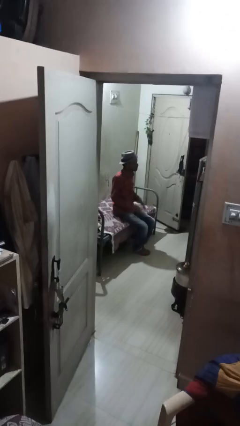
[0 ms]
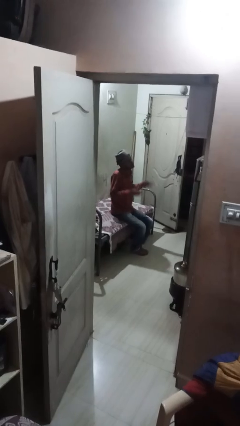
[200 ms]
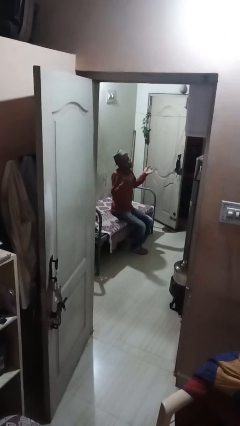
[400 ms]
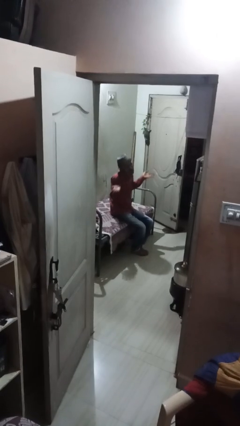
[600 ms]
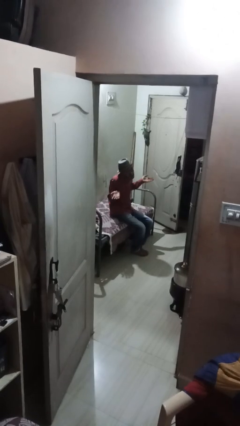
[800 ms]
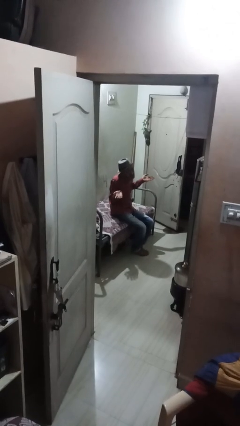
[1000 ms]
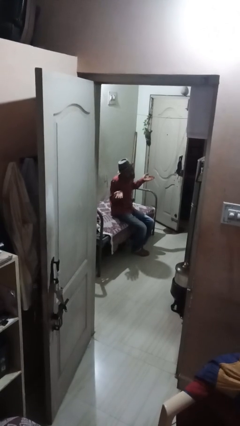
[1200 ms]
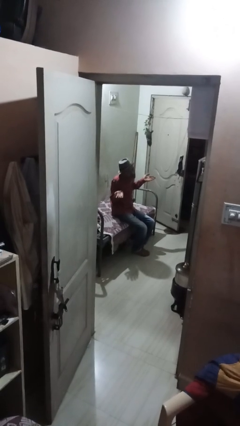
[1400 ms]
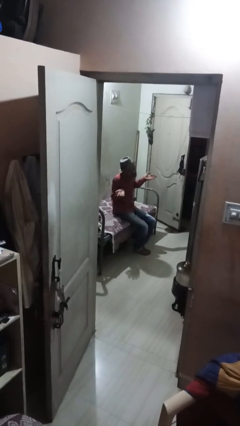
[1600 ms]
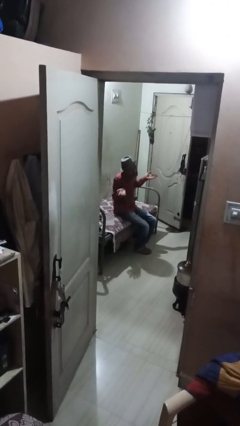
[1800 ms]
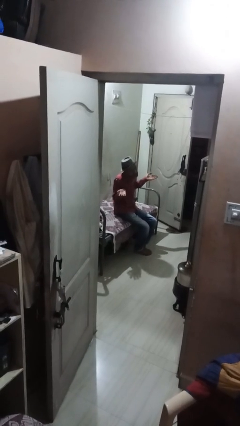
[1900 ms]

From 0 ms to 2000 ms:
person shrugs

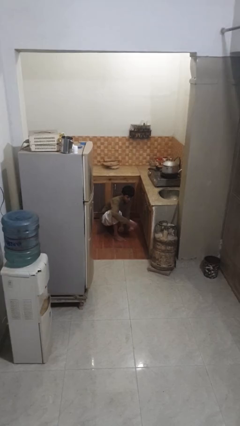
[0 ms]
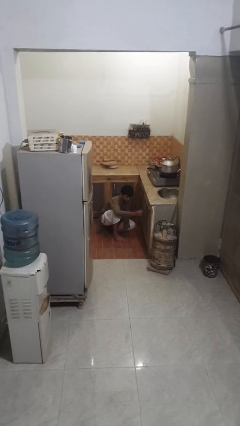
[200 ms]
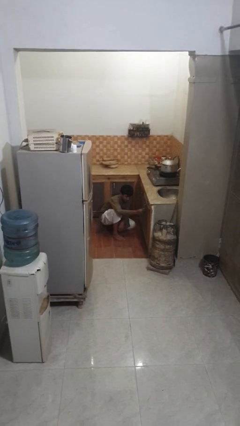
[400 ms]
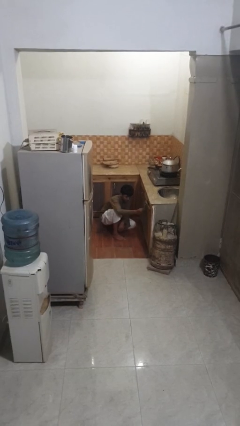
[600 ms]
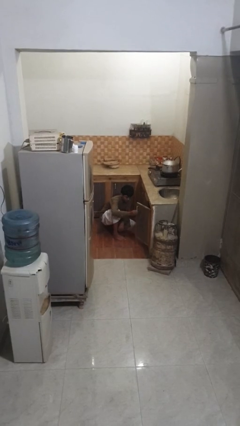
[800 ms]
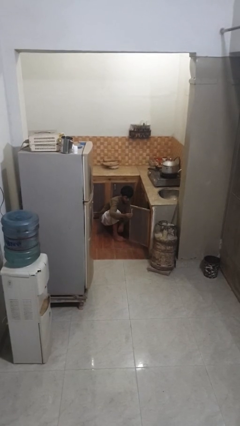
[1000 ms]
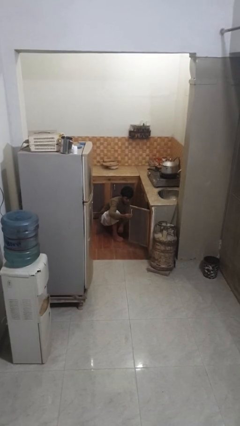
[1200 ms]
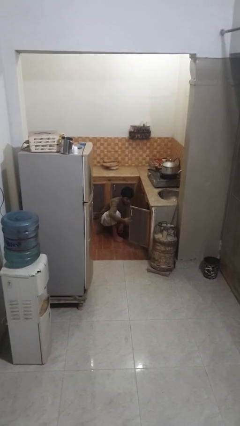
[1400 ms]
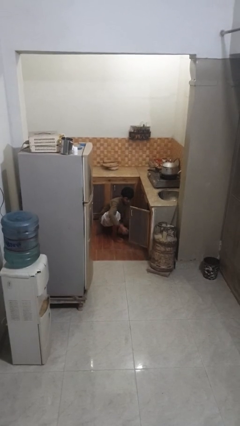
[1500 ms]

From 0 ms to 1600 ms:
person opens kitchen drawer

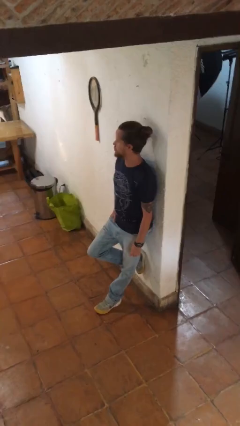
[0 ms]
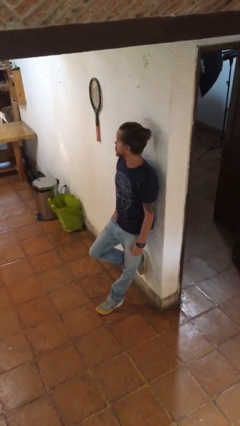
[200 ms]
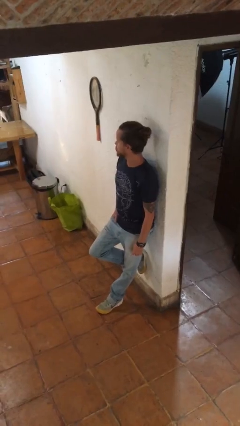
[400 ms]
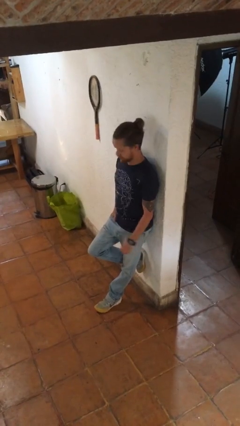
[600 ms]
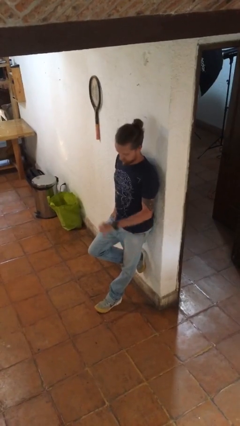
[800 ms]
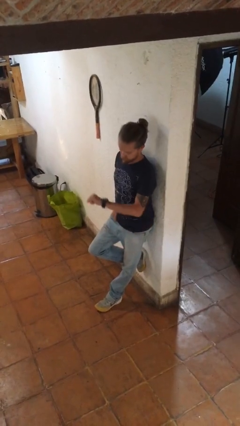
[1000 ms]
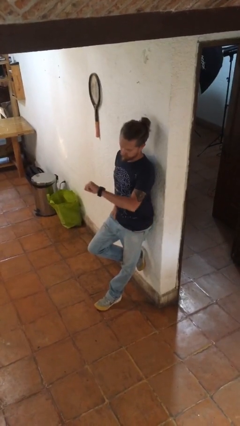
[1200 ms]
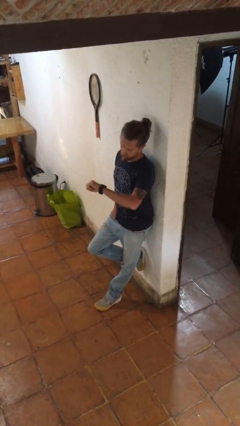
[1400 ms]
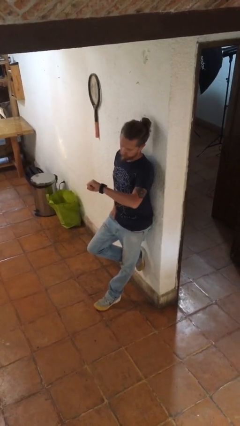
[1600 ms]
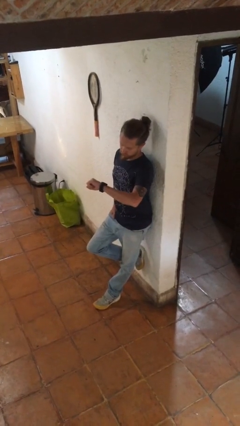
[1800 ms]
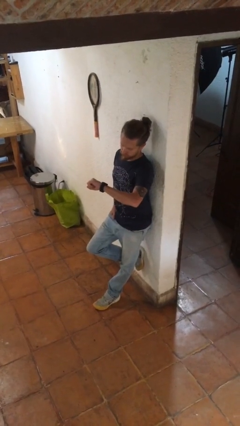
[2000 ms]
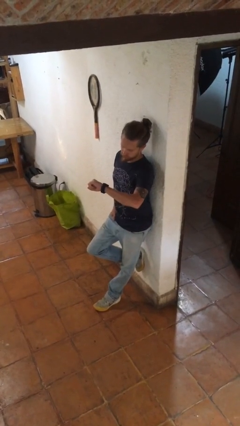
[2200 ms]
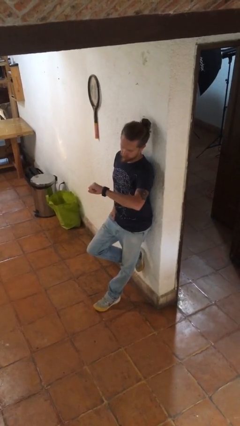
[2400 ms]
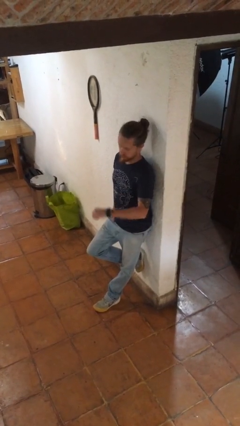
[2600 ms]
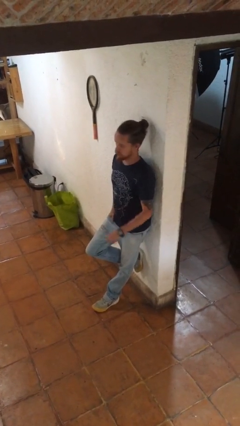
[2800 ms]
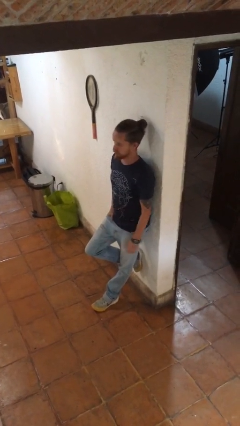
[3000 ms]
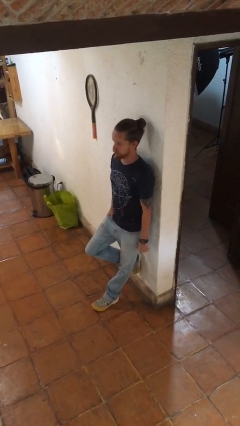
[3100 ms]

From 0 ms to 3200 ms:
person looks at wristwatch

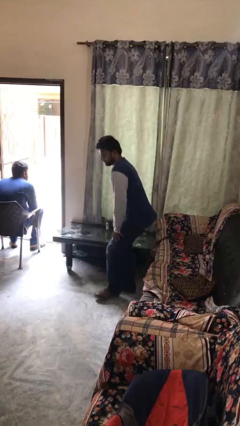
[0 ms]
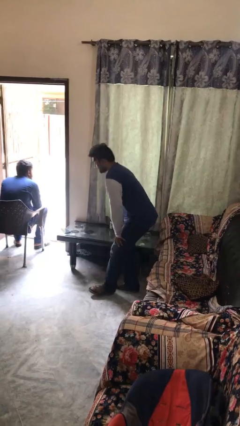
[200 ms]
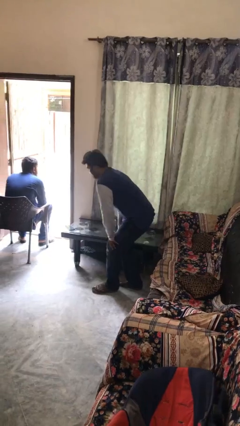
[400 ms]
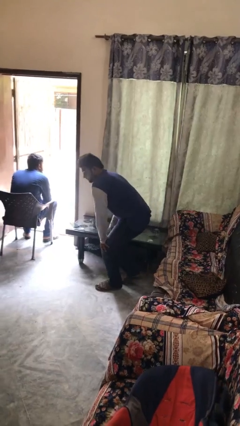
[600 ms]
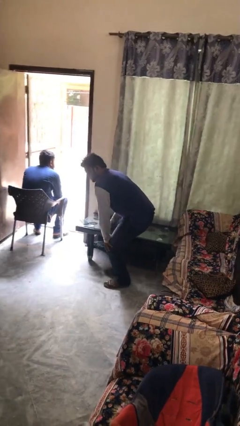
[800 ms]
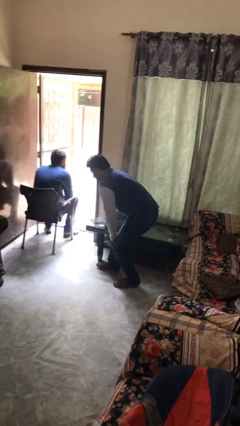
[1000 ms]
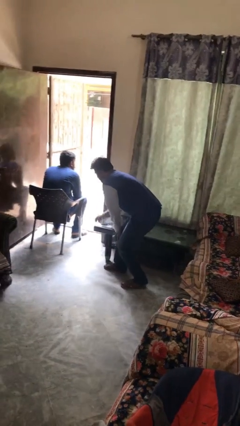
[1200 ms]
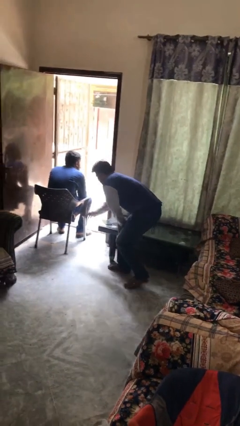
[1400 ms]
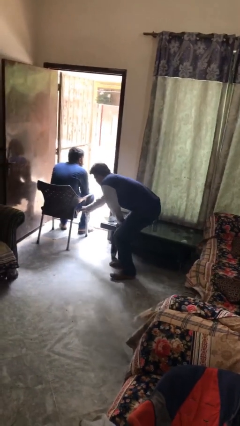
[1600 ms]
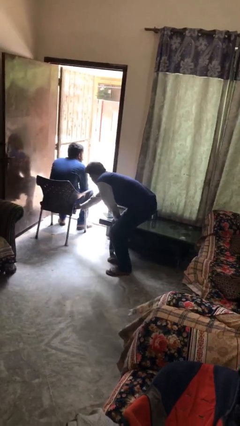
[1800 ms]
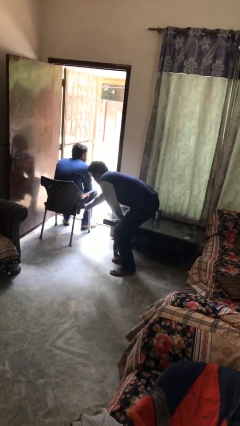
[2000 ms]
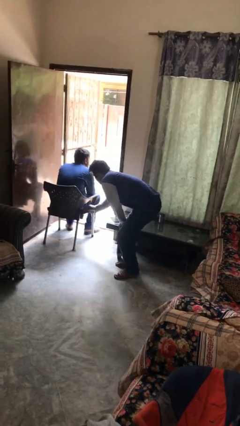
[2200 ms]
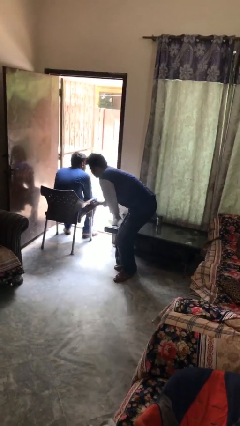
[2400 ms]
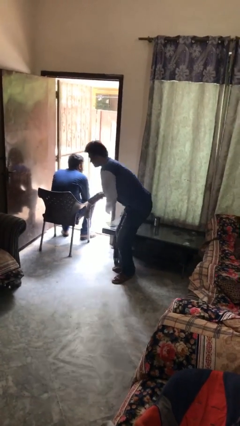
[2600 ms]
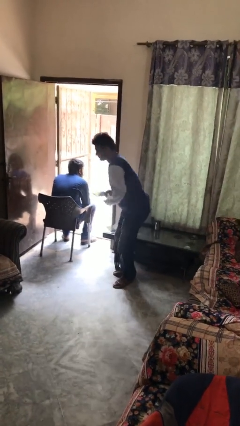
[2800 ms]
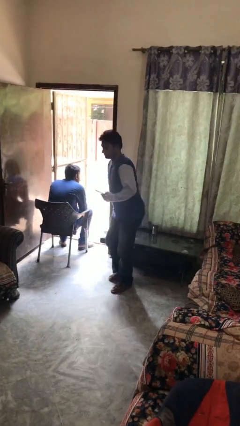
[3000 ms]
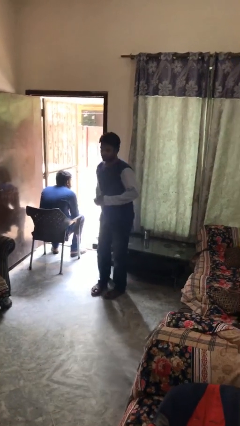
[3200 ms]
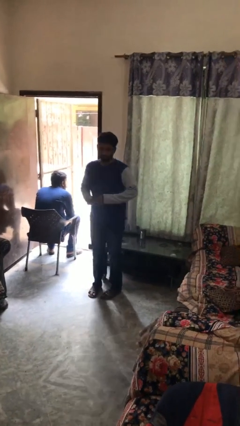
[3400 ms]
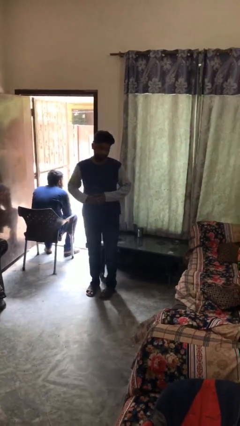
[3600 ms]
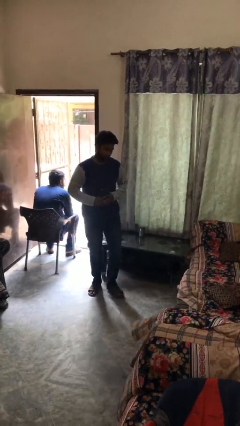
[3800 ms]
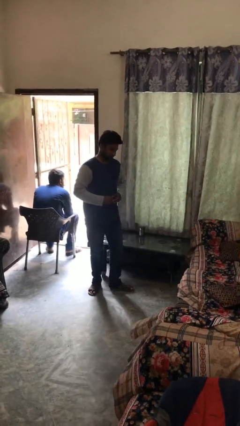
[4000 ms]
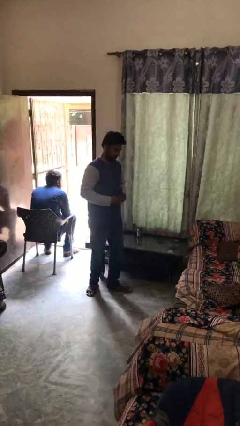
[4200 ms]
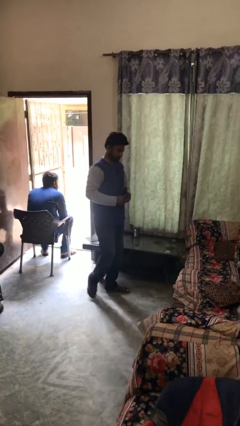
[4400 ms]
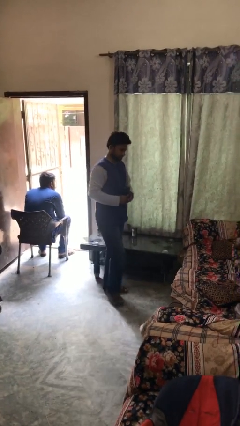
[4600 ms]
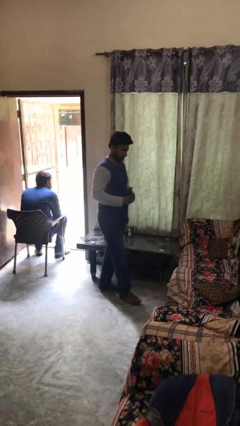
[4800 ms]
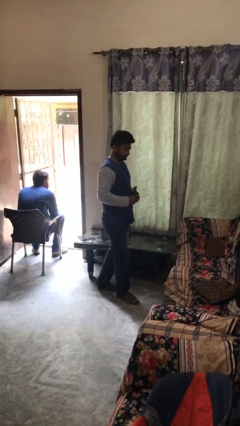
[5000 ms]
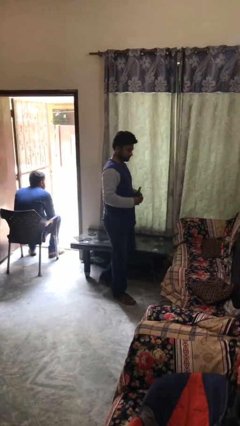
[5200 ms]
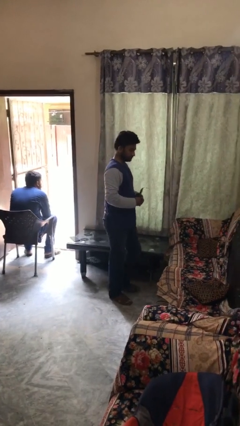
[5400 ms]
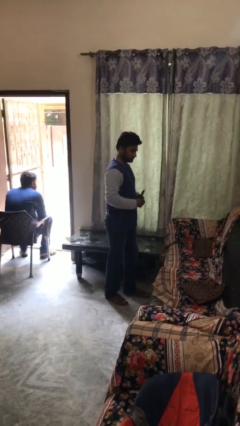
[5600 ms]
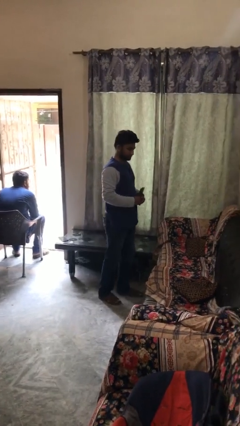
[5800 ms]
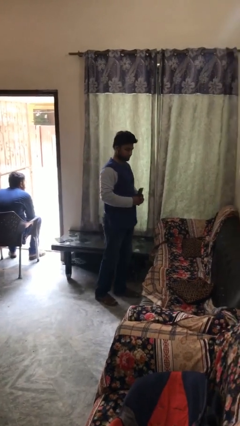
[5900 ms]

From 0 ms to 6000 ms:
person steals object from person

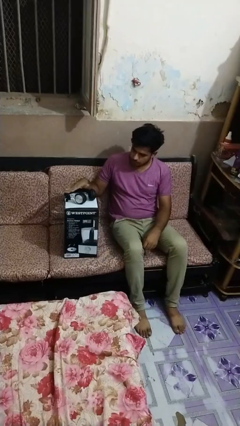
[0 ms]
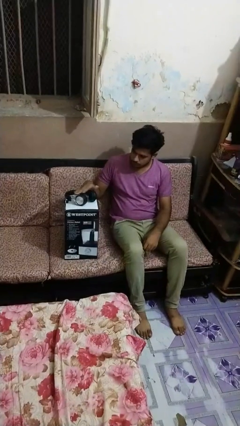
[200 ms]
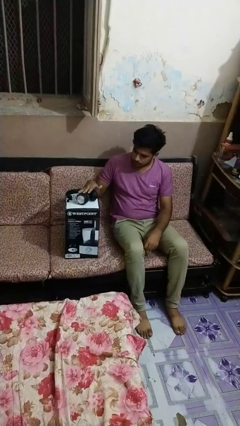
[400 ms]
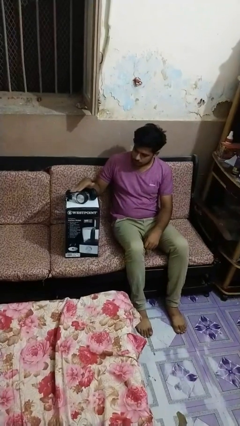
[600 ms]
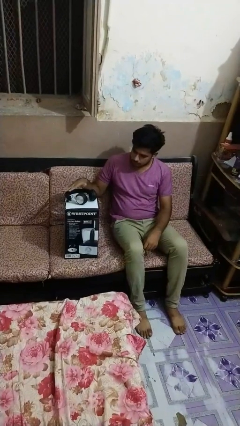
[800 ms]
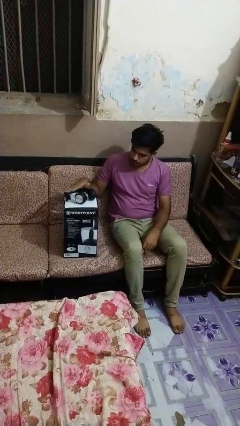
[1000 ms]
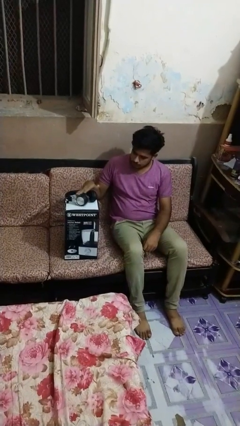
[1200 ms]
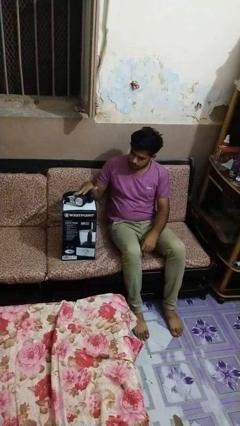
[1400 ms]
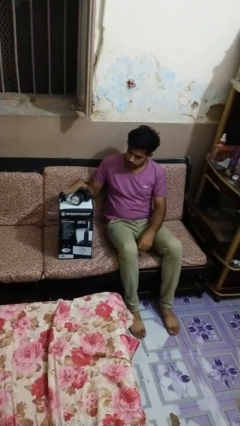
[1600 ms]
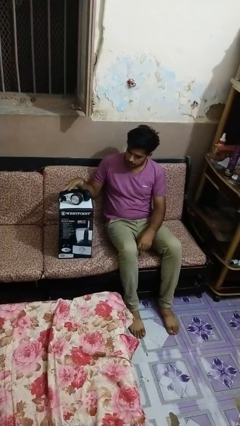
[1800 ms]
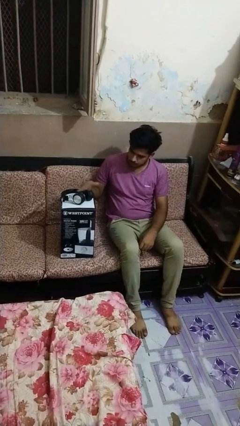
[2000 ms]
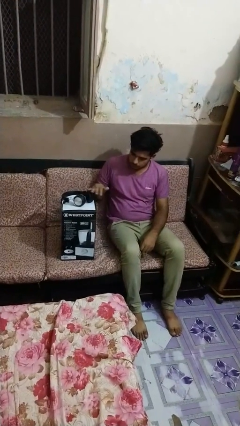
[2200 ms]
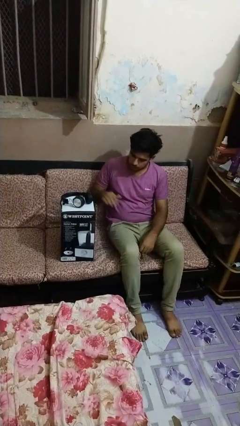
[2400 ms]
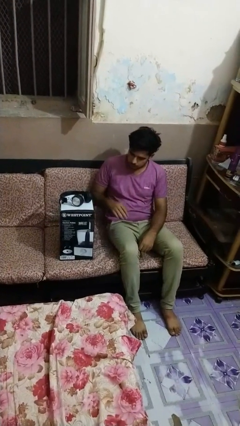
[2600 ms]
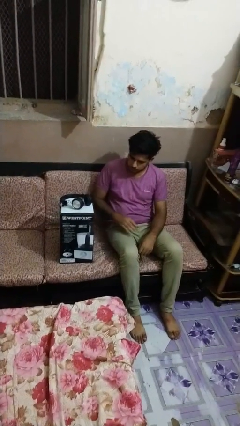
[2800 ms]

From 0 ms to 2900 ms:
person waves hand over object

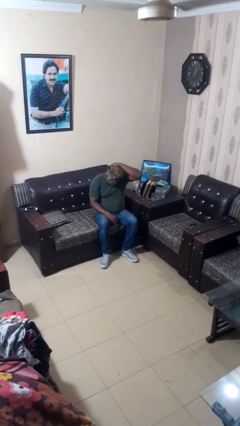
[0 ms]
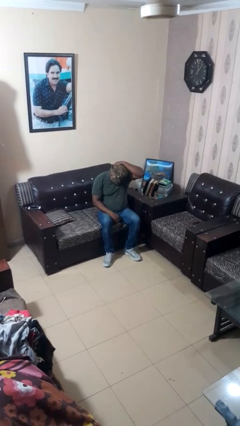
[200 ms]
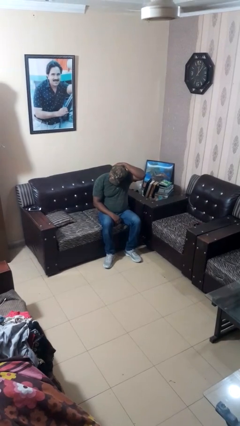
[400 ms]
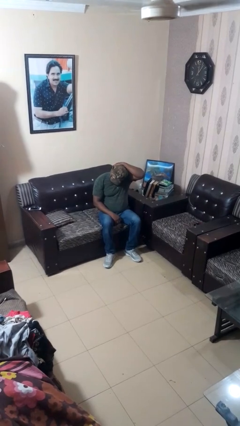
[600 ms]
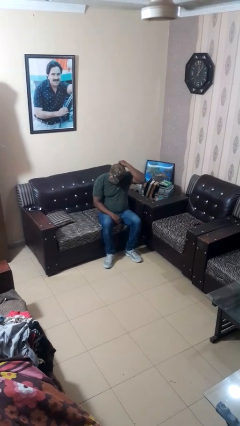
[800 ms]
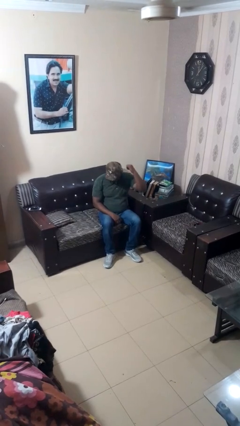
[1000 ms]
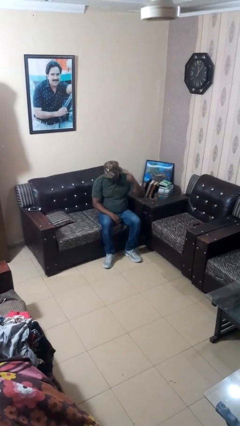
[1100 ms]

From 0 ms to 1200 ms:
person rubs neck

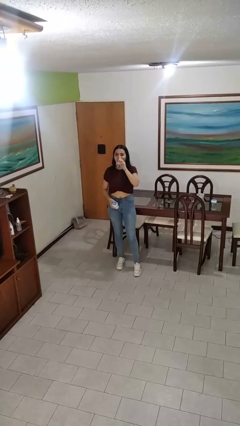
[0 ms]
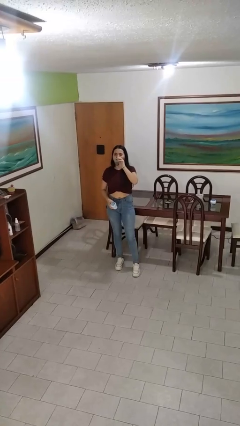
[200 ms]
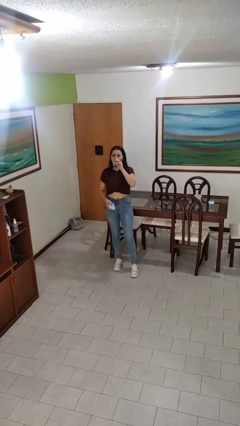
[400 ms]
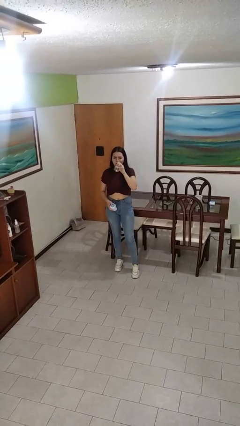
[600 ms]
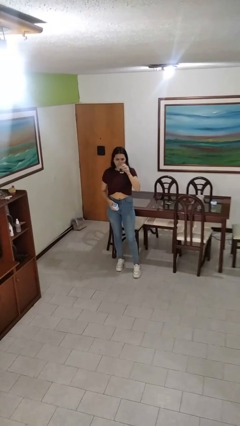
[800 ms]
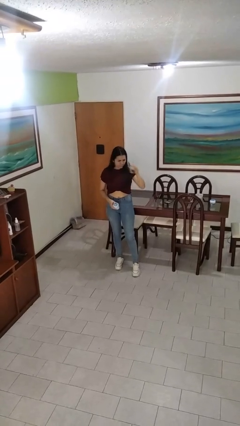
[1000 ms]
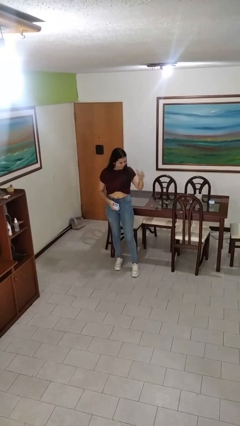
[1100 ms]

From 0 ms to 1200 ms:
person drinks from cup
